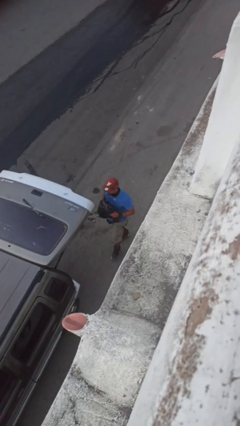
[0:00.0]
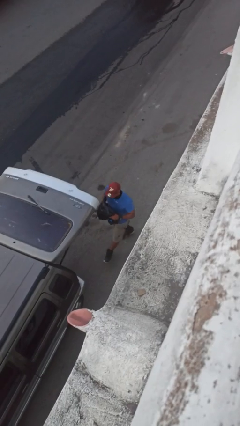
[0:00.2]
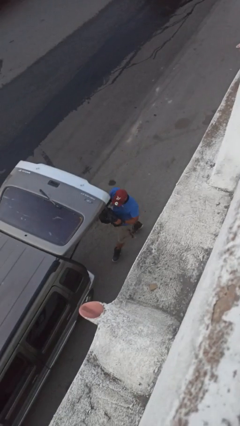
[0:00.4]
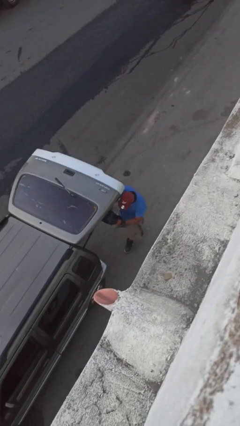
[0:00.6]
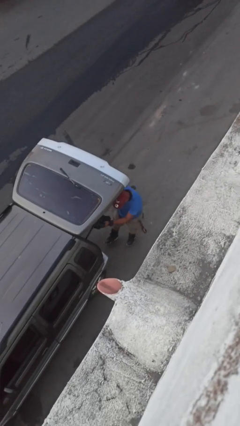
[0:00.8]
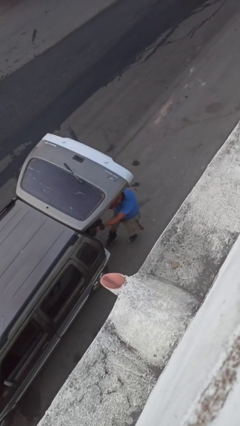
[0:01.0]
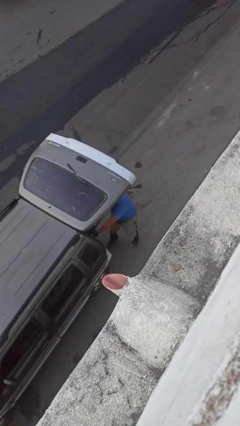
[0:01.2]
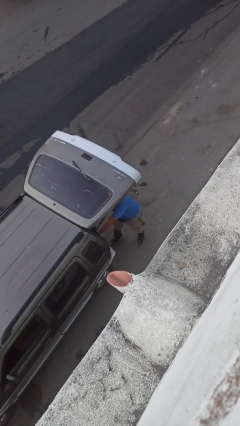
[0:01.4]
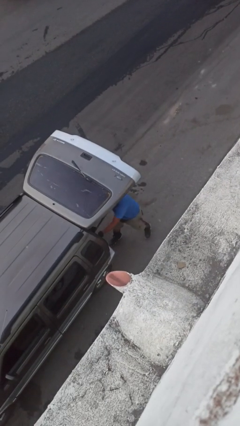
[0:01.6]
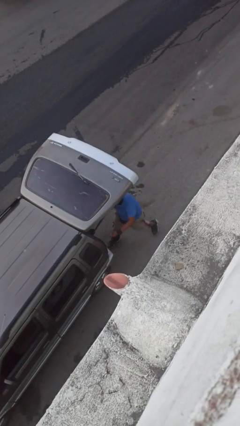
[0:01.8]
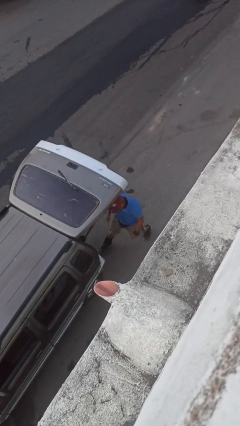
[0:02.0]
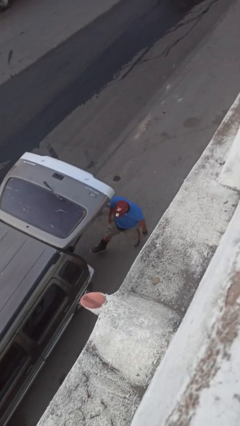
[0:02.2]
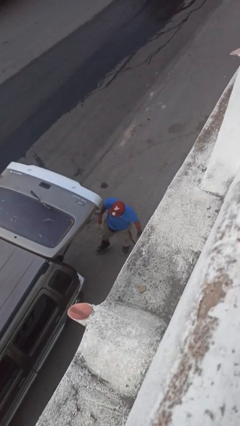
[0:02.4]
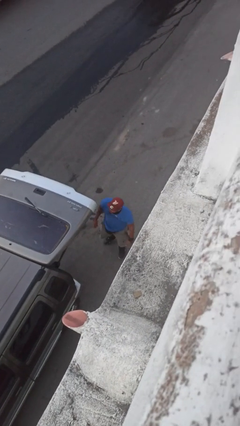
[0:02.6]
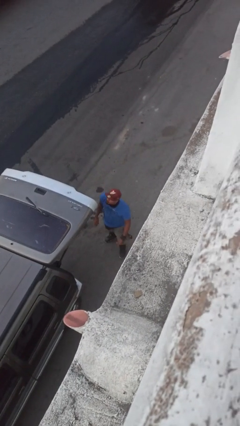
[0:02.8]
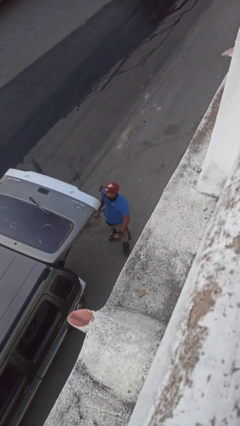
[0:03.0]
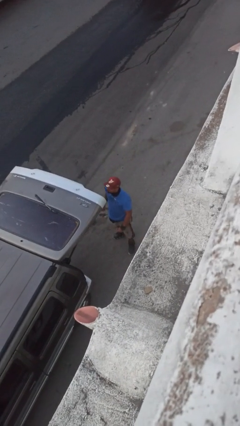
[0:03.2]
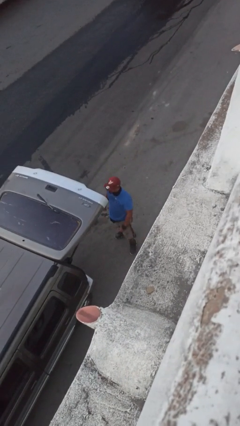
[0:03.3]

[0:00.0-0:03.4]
person loads car

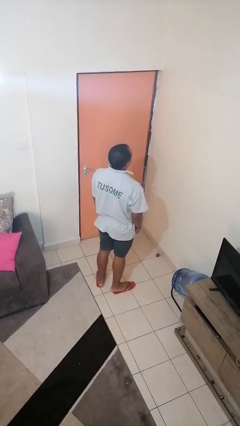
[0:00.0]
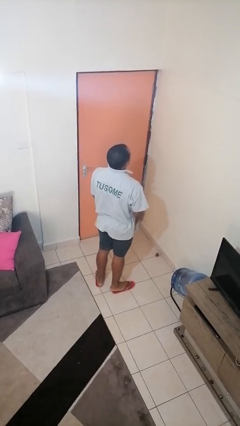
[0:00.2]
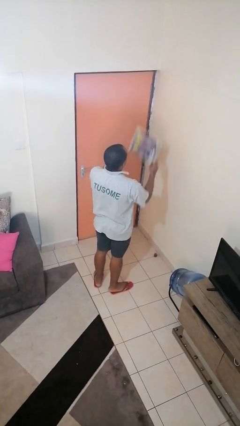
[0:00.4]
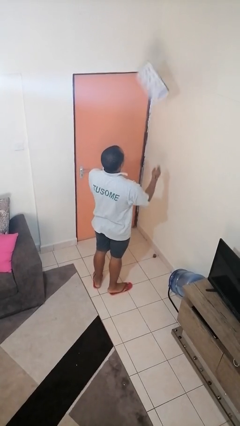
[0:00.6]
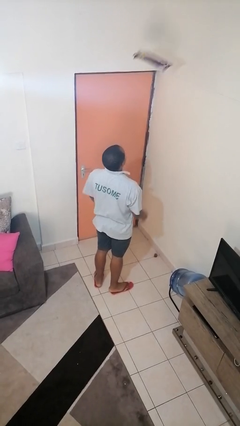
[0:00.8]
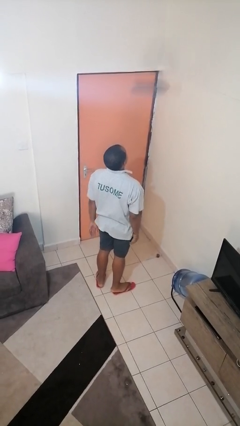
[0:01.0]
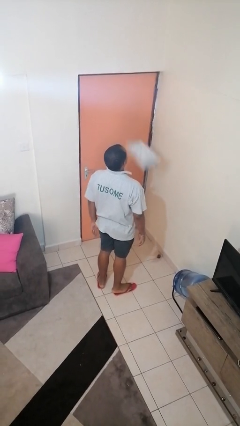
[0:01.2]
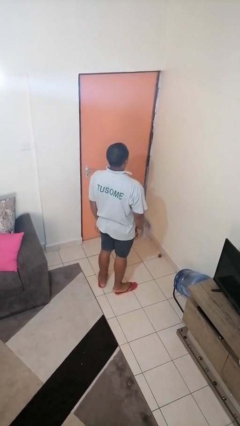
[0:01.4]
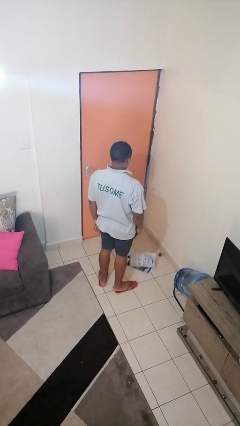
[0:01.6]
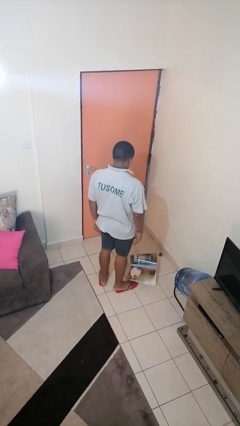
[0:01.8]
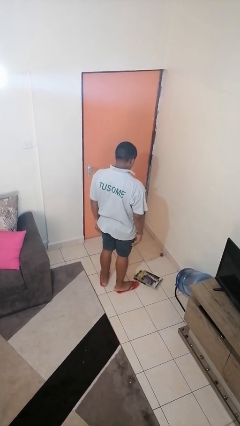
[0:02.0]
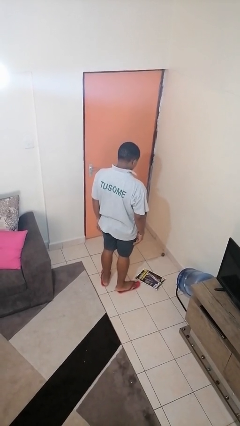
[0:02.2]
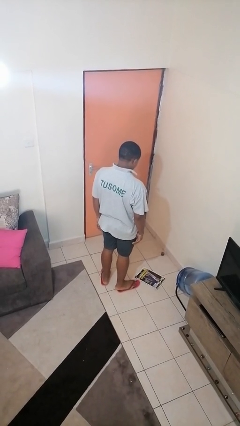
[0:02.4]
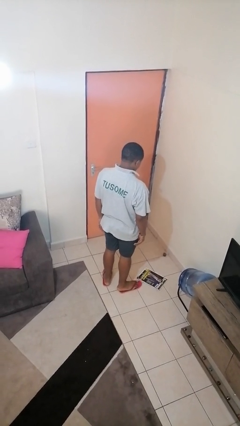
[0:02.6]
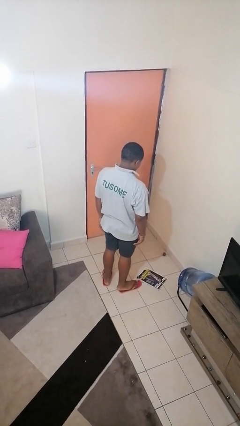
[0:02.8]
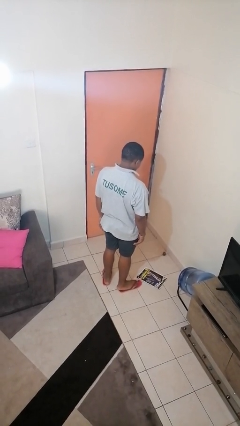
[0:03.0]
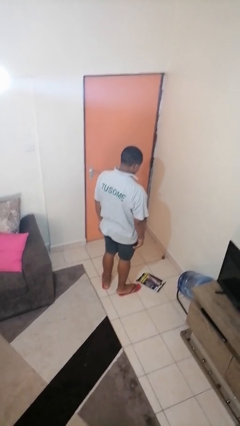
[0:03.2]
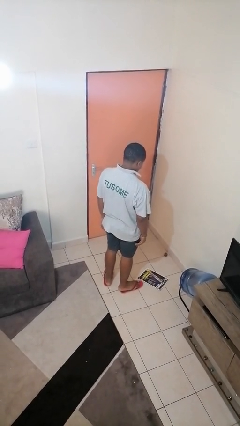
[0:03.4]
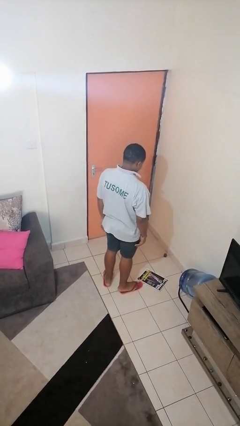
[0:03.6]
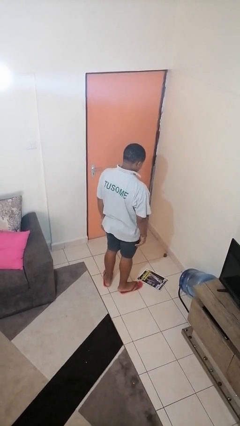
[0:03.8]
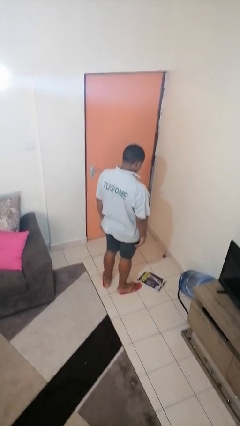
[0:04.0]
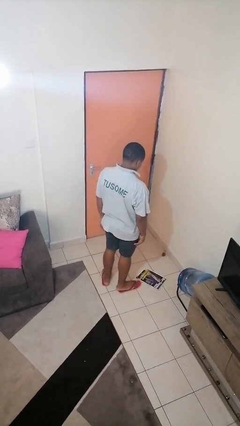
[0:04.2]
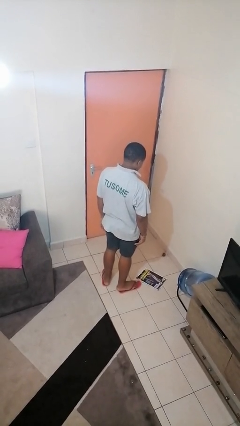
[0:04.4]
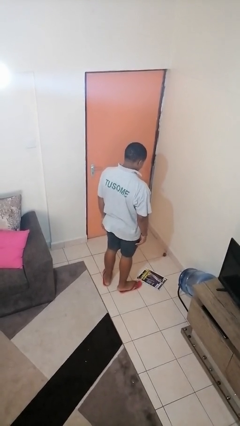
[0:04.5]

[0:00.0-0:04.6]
person throws object into air

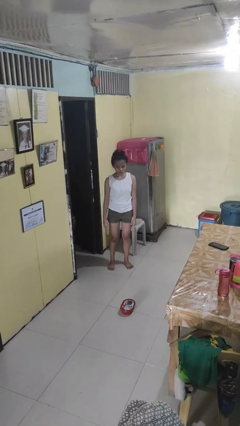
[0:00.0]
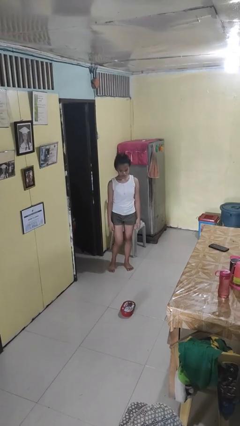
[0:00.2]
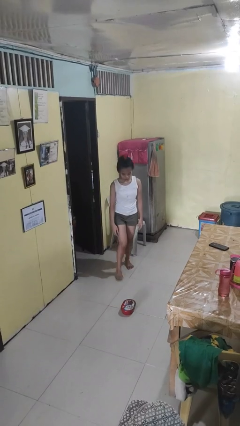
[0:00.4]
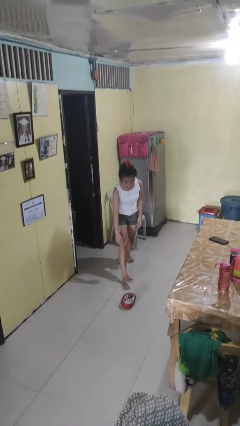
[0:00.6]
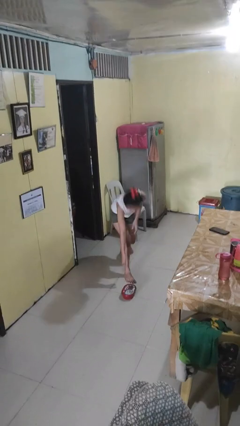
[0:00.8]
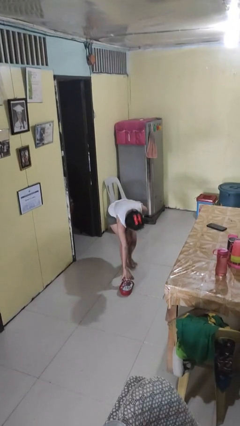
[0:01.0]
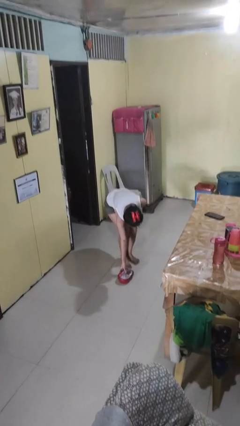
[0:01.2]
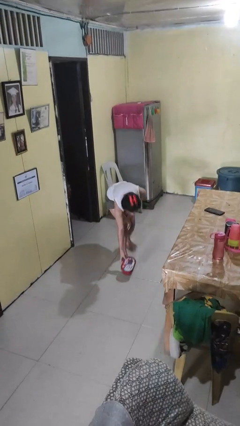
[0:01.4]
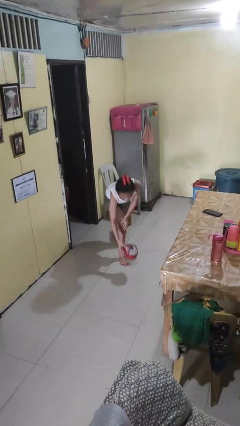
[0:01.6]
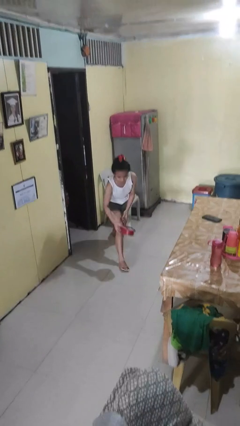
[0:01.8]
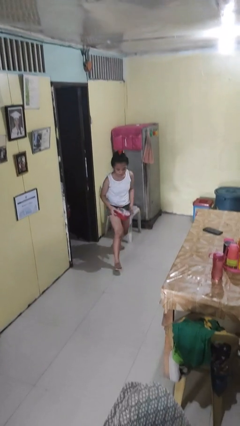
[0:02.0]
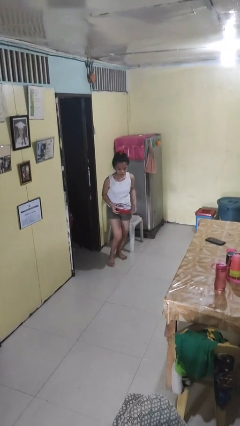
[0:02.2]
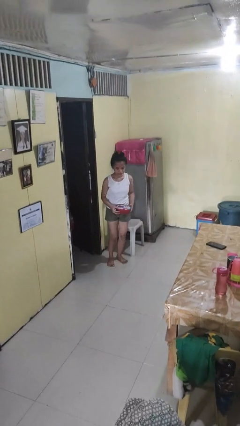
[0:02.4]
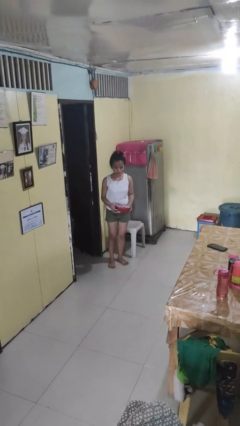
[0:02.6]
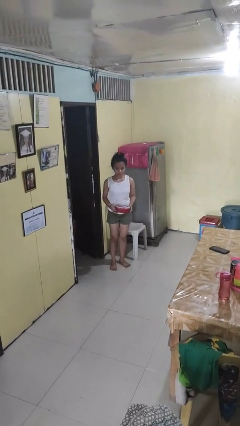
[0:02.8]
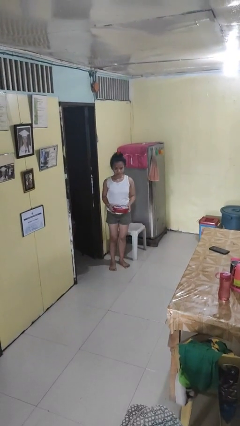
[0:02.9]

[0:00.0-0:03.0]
person picks up object from floor

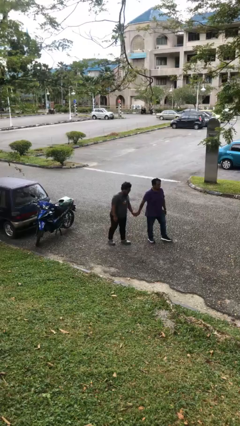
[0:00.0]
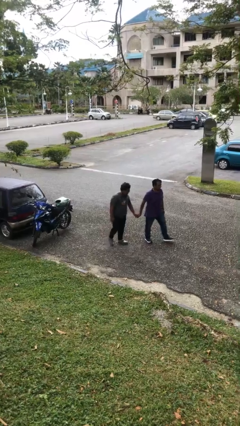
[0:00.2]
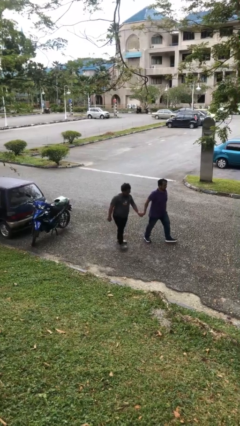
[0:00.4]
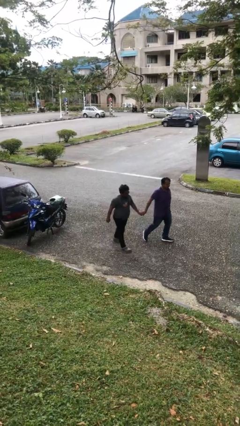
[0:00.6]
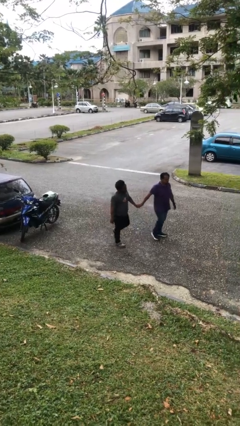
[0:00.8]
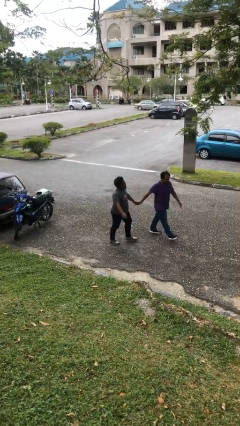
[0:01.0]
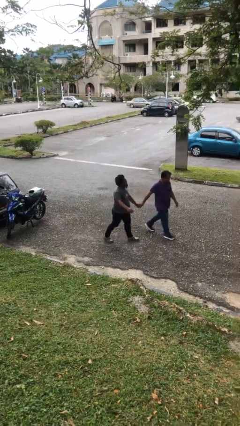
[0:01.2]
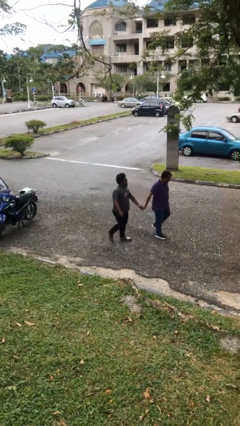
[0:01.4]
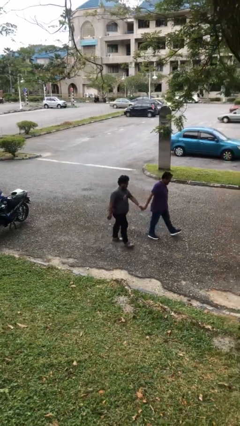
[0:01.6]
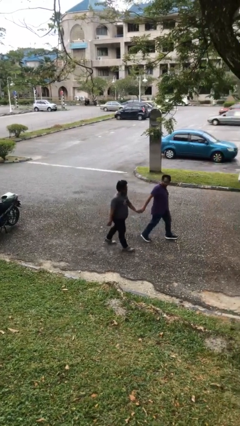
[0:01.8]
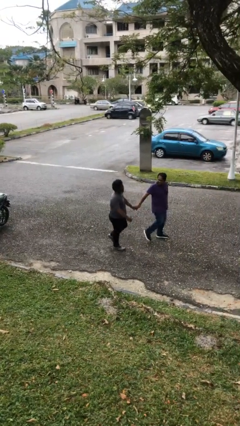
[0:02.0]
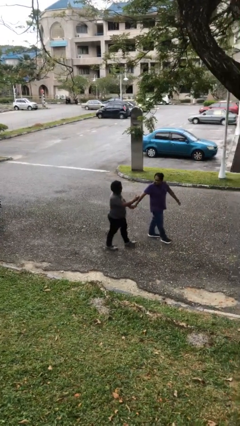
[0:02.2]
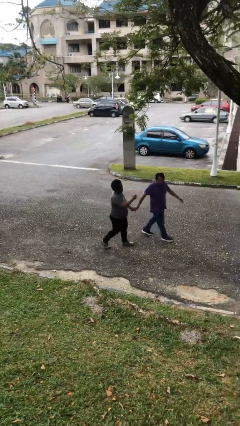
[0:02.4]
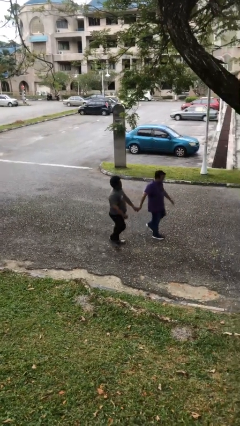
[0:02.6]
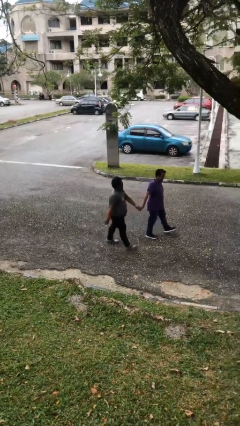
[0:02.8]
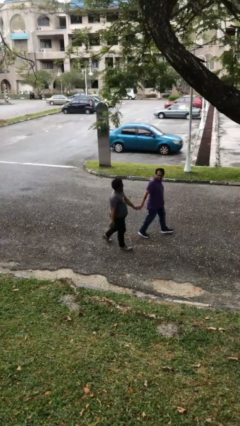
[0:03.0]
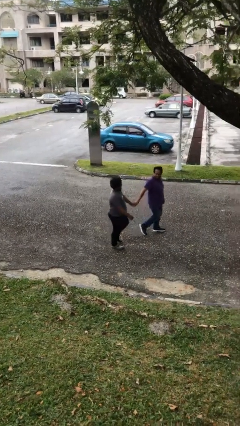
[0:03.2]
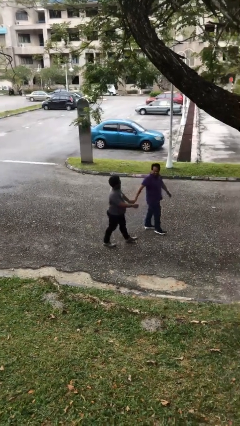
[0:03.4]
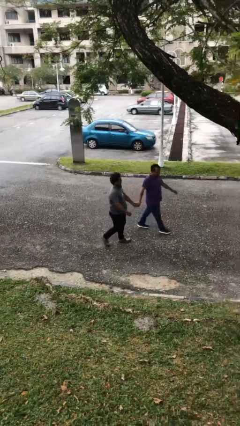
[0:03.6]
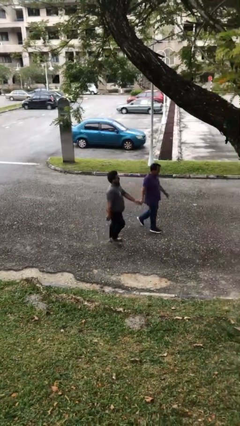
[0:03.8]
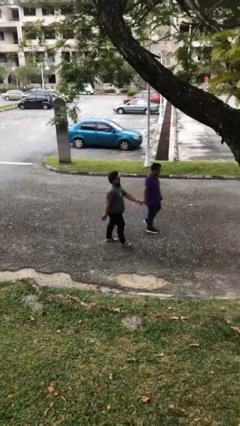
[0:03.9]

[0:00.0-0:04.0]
person holds hand

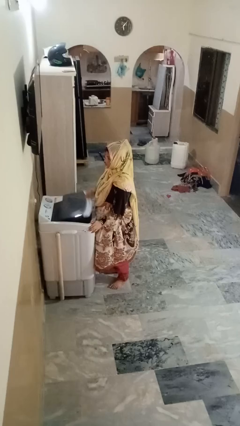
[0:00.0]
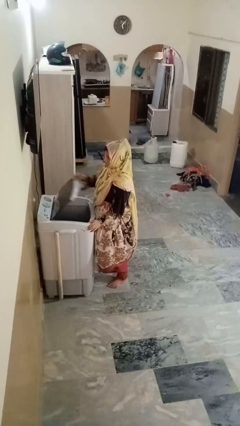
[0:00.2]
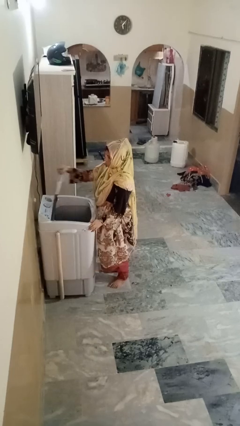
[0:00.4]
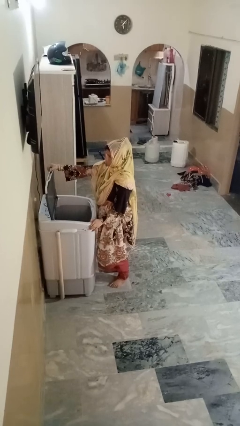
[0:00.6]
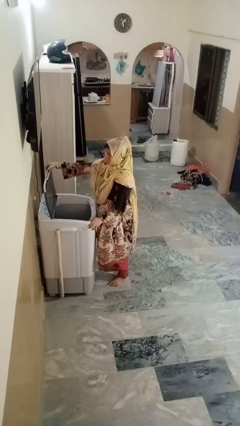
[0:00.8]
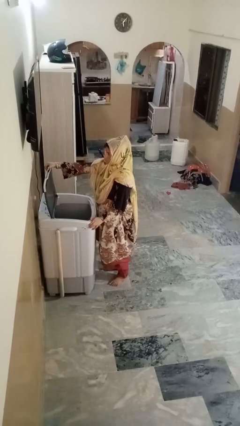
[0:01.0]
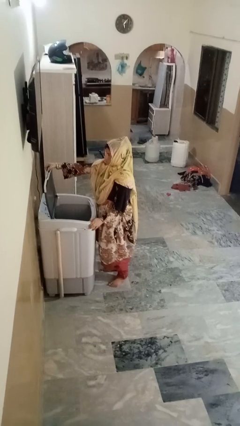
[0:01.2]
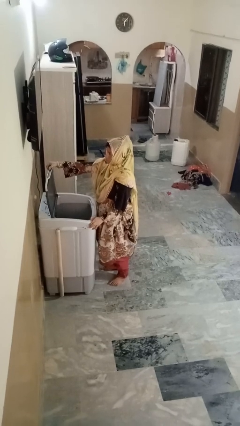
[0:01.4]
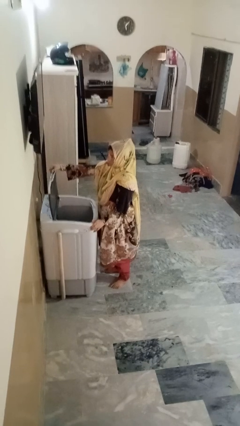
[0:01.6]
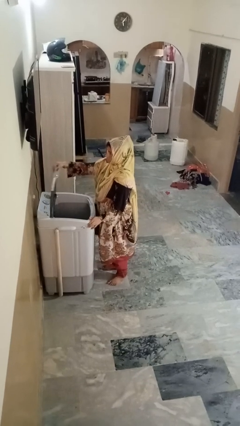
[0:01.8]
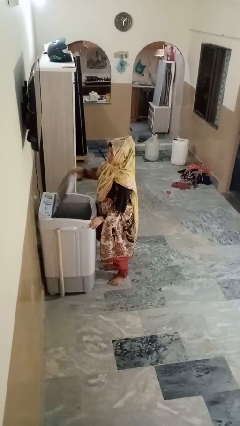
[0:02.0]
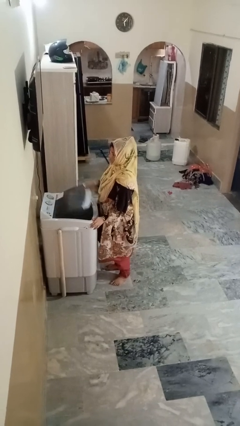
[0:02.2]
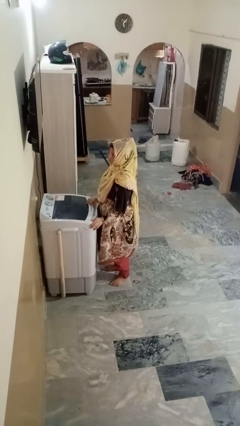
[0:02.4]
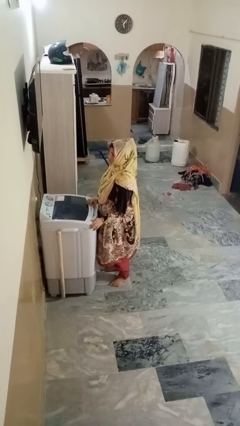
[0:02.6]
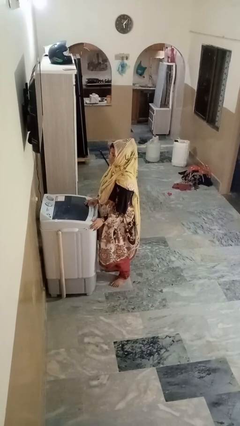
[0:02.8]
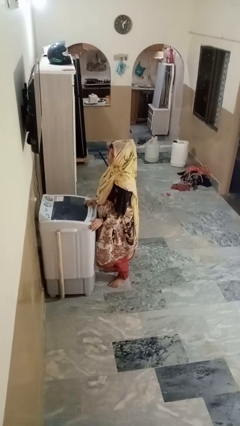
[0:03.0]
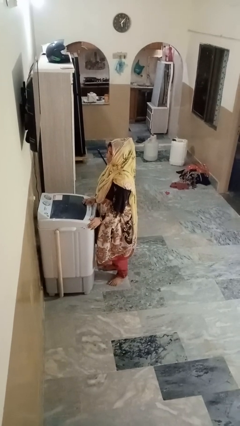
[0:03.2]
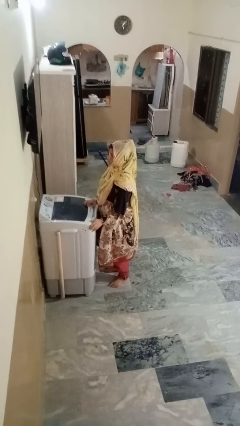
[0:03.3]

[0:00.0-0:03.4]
person opens clothes washer
